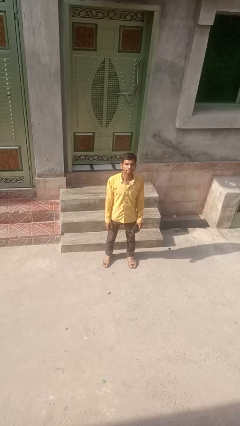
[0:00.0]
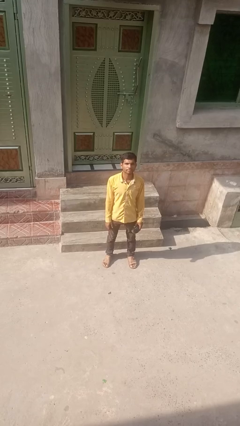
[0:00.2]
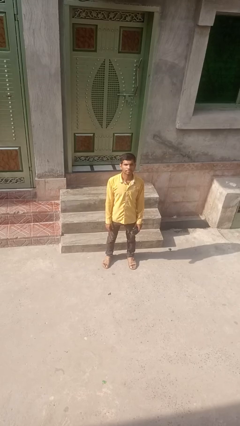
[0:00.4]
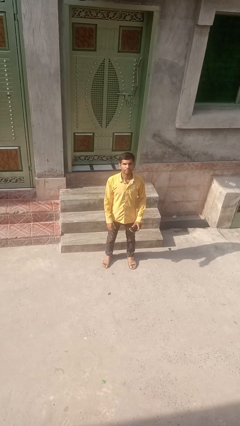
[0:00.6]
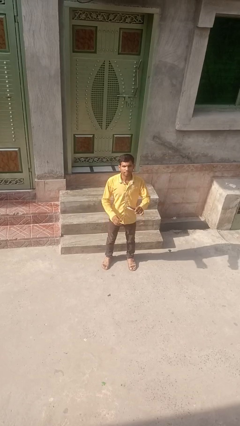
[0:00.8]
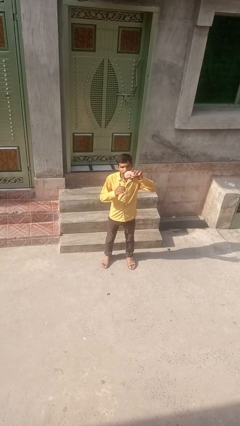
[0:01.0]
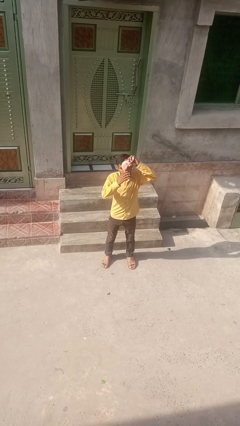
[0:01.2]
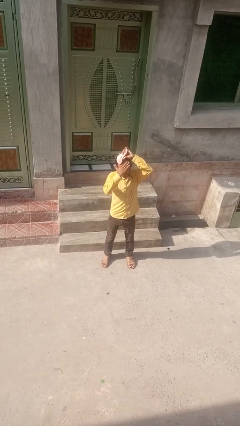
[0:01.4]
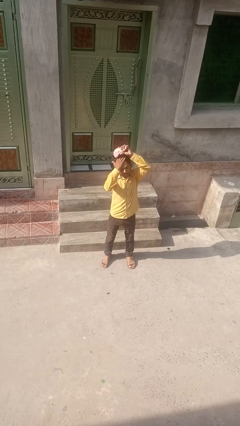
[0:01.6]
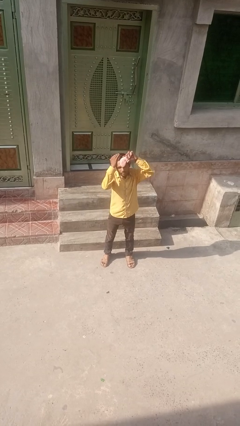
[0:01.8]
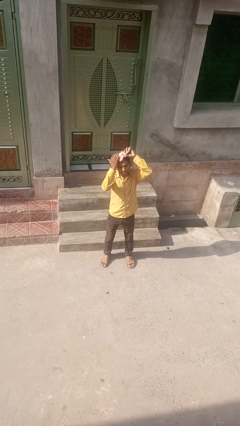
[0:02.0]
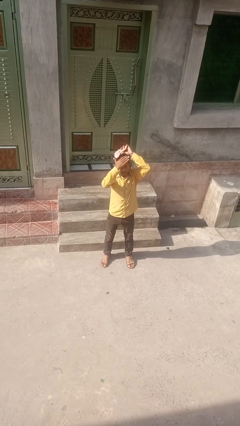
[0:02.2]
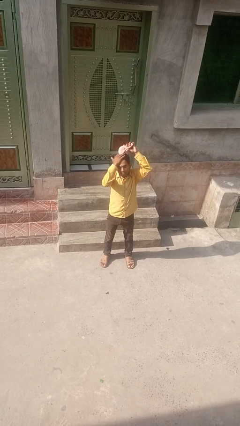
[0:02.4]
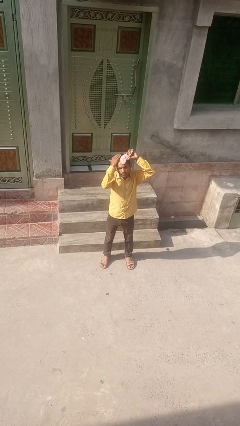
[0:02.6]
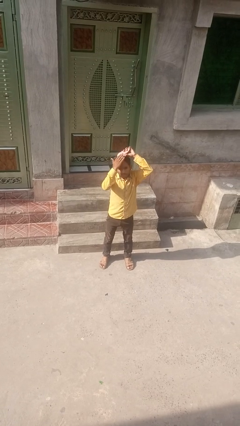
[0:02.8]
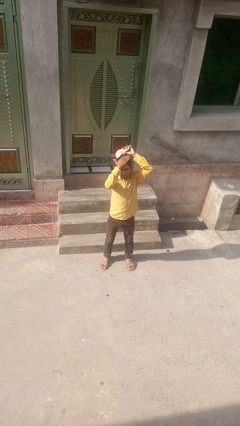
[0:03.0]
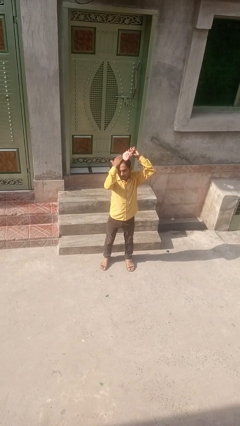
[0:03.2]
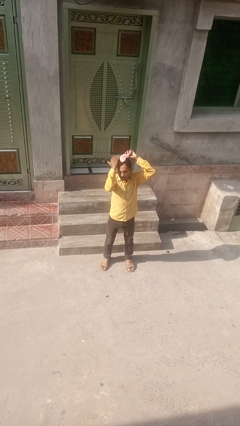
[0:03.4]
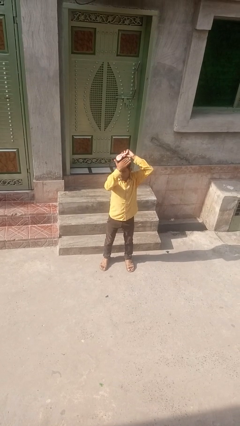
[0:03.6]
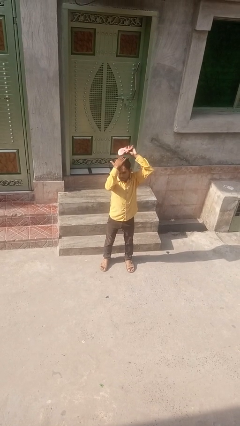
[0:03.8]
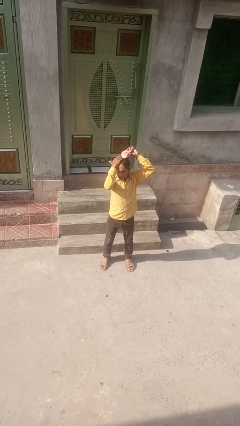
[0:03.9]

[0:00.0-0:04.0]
person brushes hair

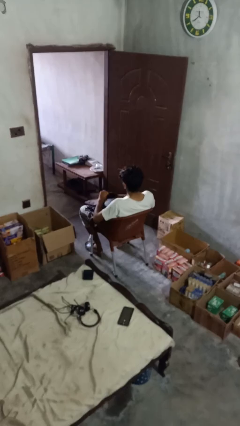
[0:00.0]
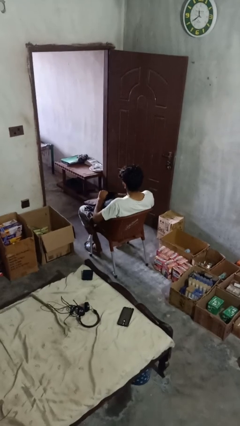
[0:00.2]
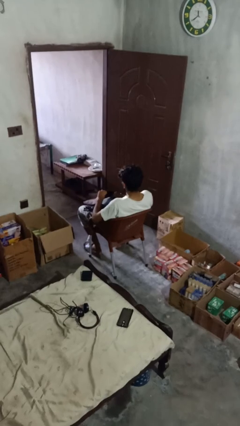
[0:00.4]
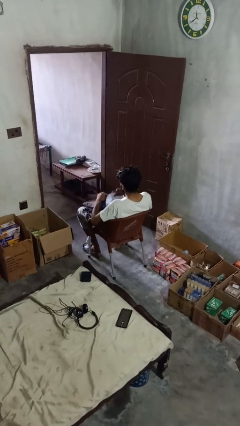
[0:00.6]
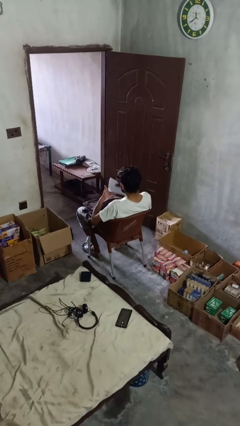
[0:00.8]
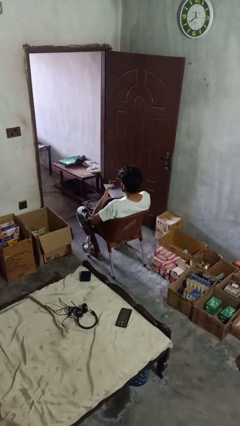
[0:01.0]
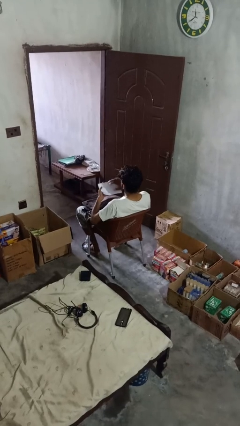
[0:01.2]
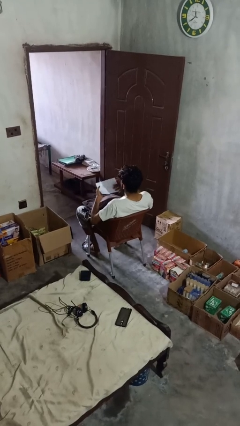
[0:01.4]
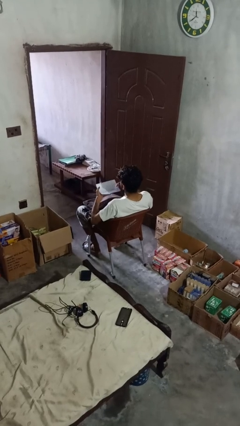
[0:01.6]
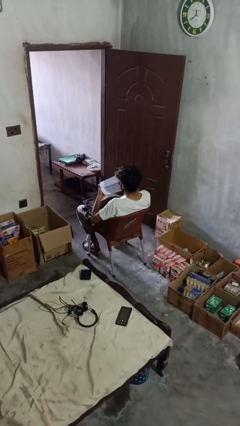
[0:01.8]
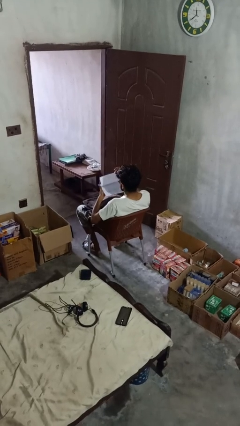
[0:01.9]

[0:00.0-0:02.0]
person searches in backpack

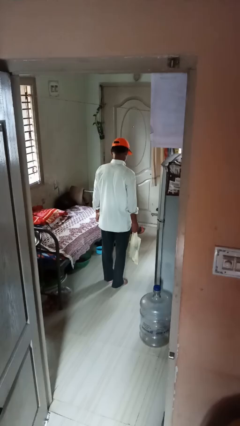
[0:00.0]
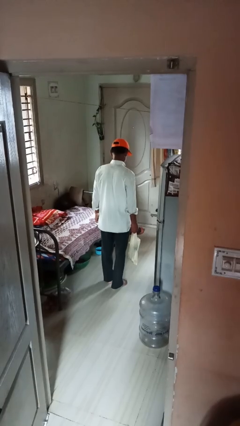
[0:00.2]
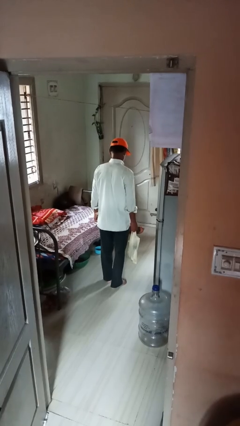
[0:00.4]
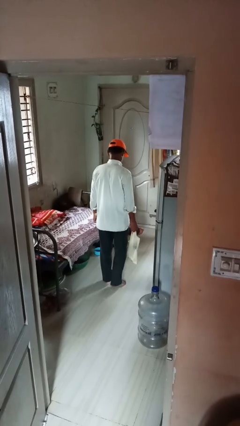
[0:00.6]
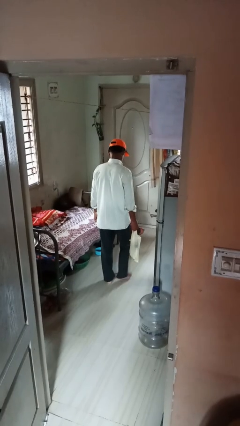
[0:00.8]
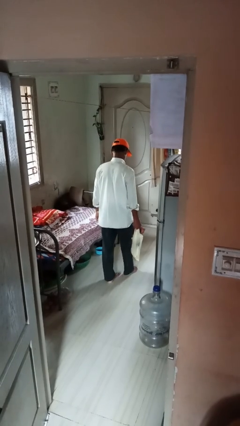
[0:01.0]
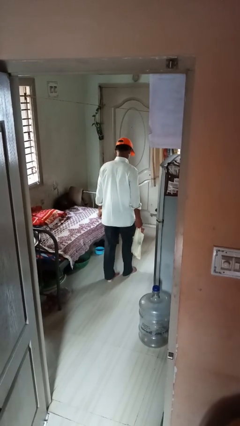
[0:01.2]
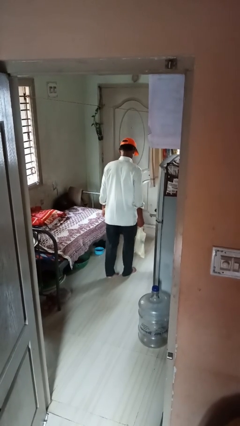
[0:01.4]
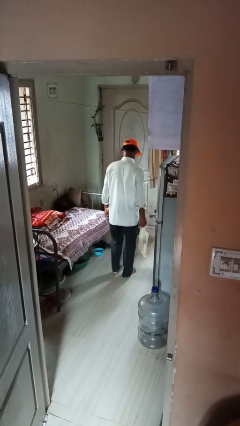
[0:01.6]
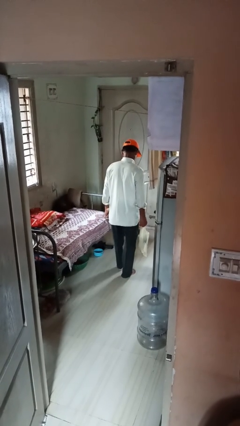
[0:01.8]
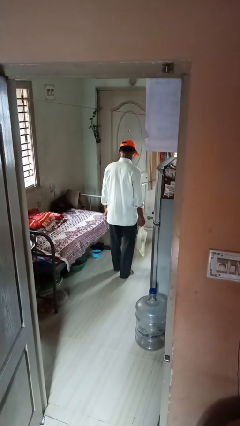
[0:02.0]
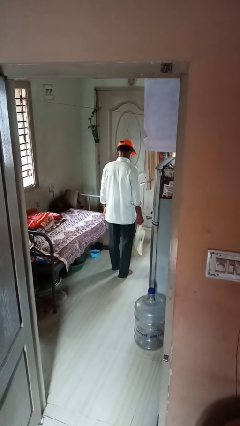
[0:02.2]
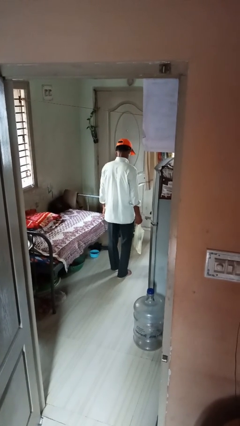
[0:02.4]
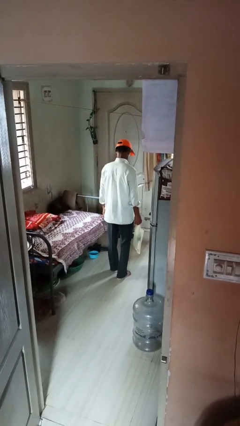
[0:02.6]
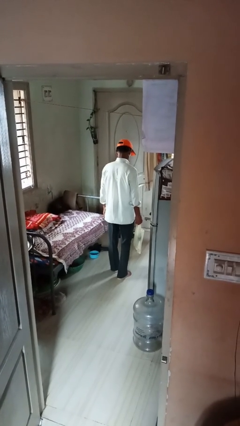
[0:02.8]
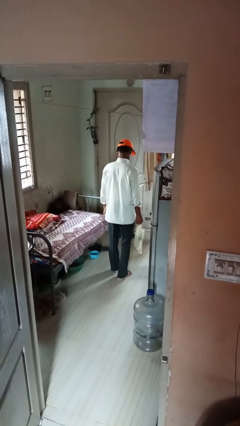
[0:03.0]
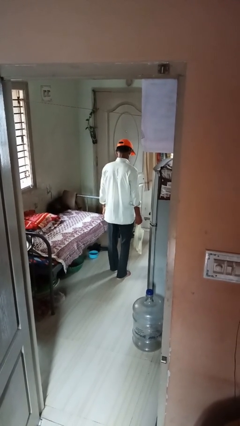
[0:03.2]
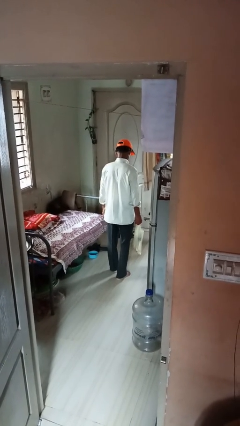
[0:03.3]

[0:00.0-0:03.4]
person carries groceries

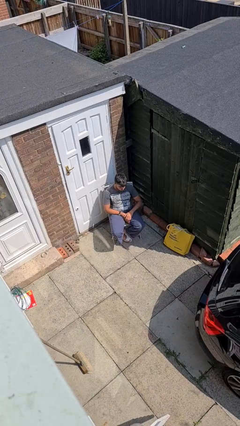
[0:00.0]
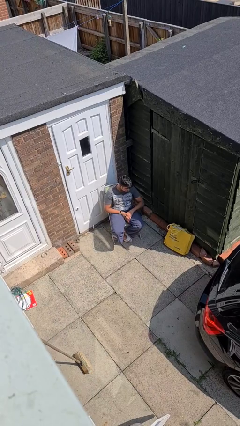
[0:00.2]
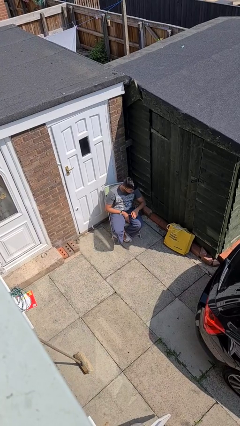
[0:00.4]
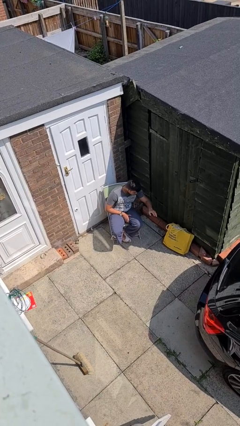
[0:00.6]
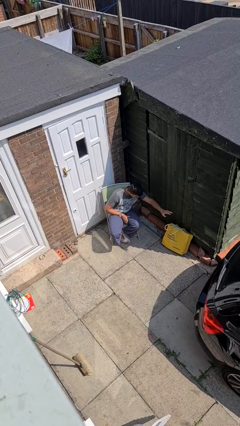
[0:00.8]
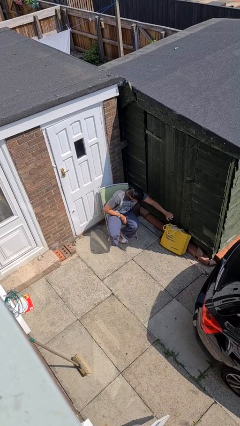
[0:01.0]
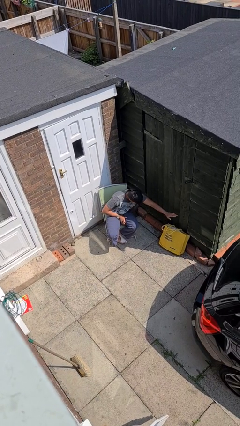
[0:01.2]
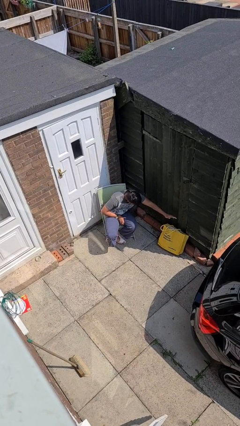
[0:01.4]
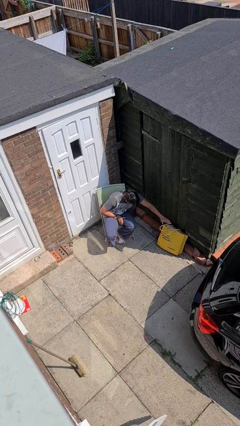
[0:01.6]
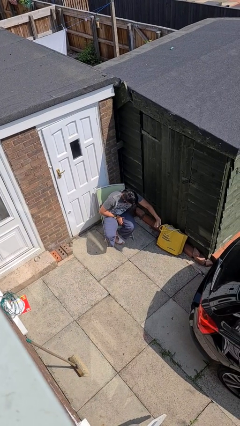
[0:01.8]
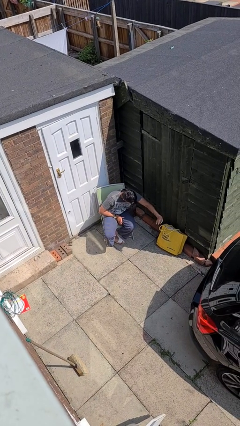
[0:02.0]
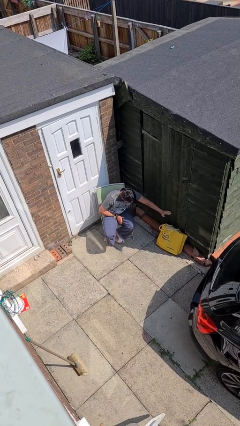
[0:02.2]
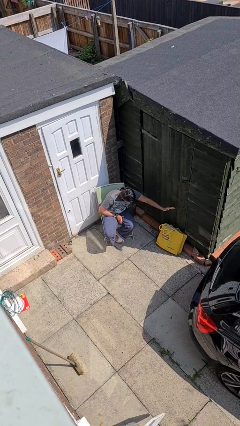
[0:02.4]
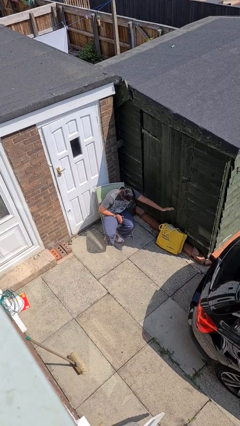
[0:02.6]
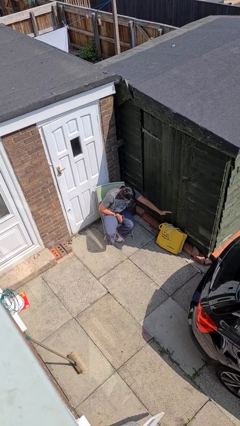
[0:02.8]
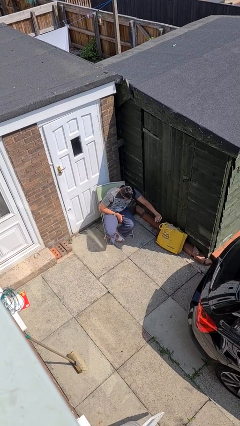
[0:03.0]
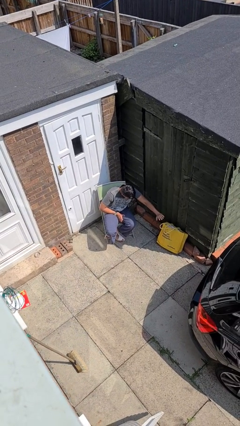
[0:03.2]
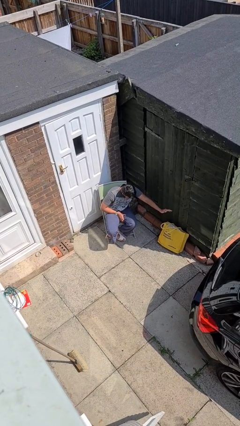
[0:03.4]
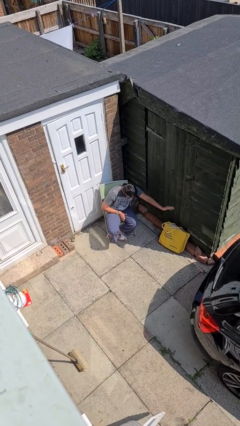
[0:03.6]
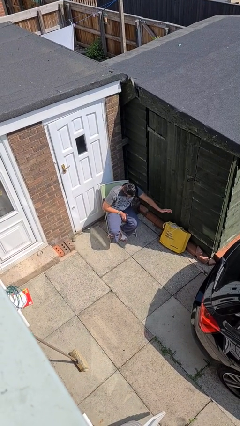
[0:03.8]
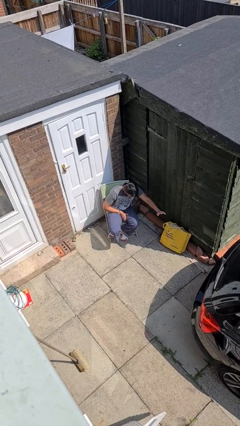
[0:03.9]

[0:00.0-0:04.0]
person waves hand over object

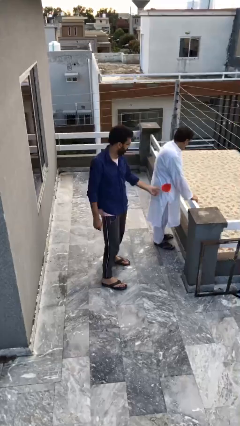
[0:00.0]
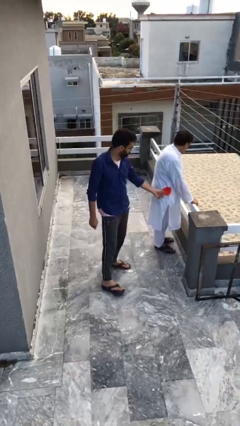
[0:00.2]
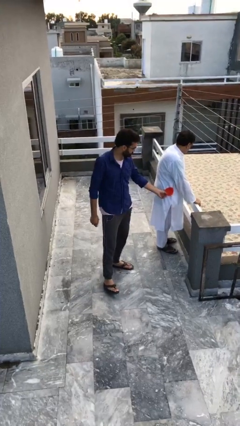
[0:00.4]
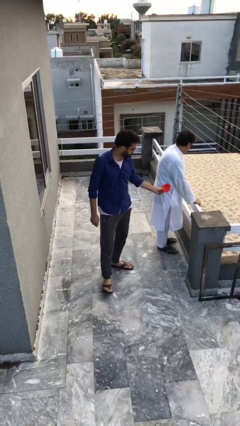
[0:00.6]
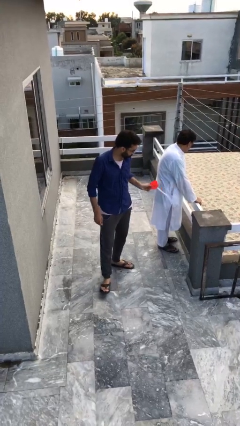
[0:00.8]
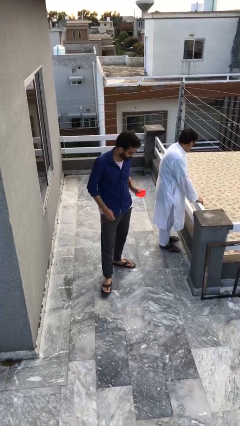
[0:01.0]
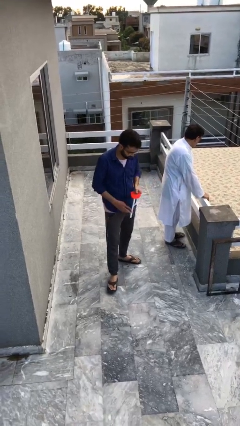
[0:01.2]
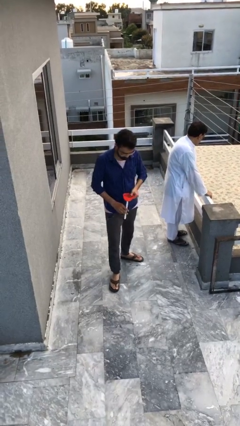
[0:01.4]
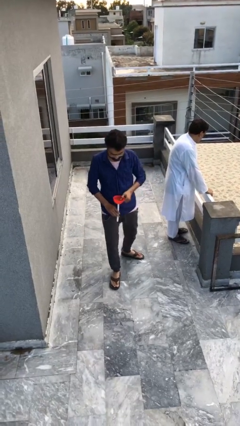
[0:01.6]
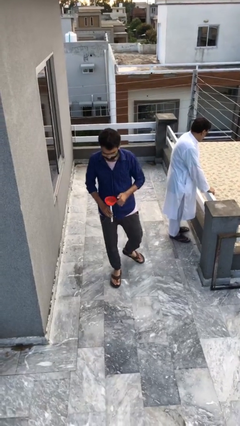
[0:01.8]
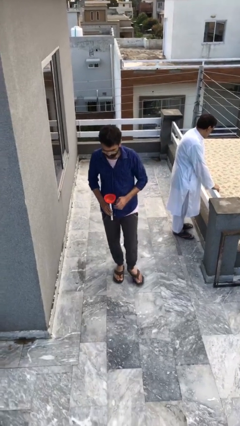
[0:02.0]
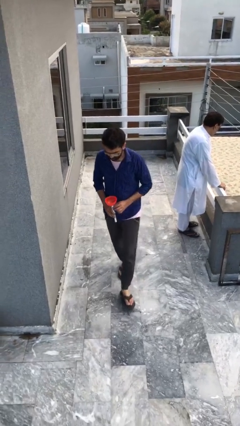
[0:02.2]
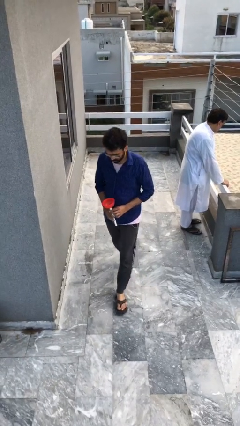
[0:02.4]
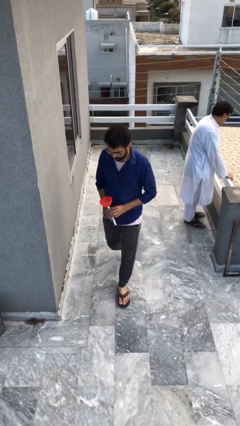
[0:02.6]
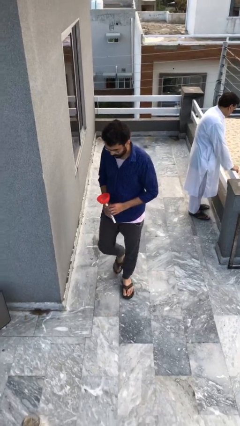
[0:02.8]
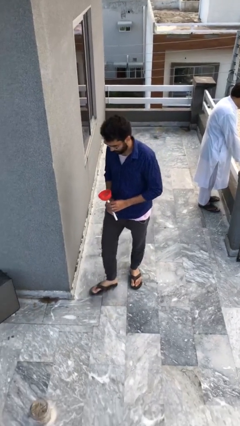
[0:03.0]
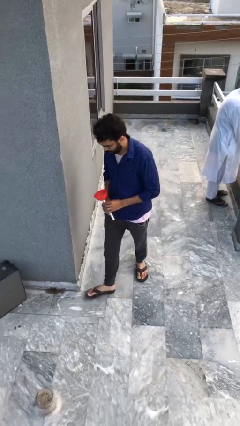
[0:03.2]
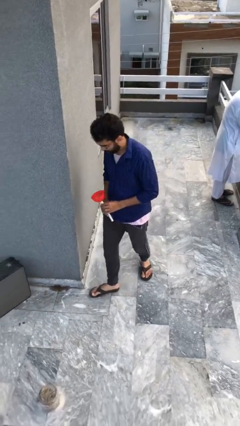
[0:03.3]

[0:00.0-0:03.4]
person steals object from person

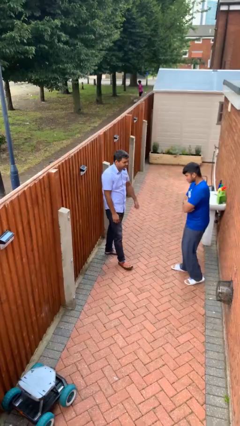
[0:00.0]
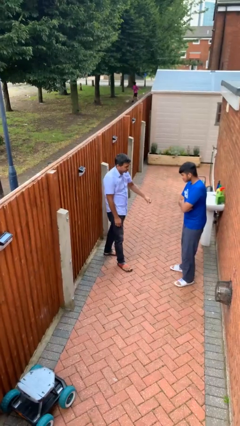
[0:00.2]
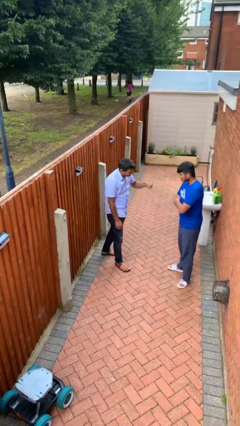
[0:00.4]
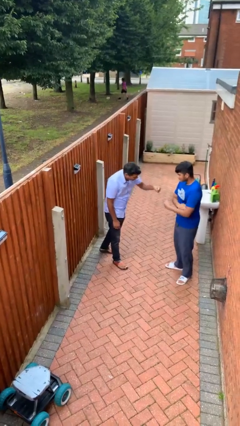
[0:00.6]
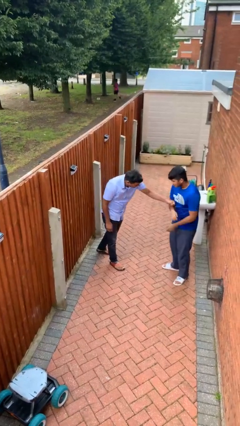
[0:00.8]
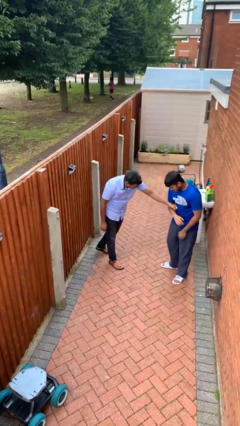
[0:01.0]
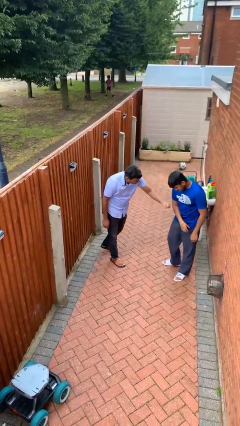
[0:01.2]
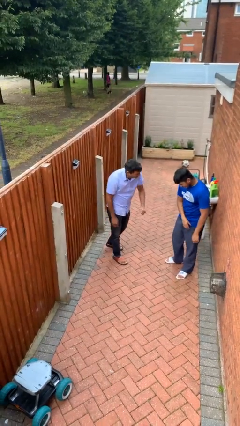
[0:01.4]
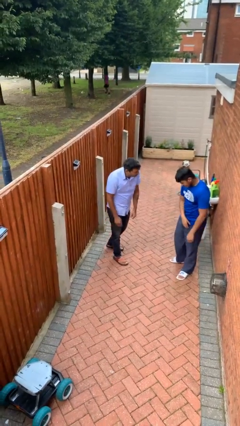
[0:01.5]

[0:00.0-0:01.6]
person shoves person
